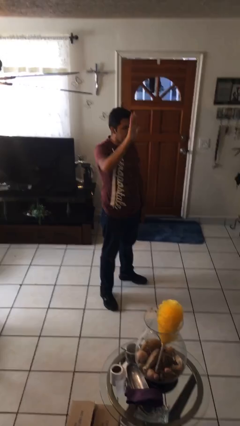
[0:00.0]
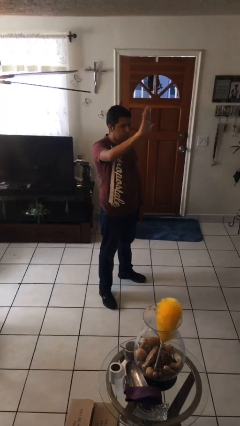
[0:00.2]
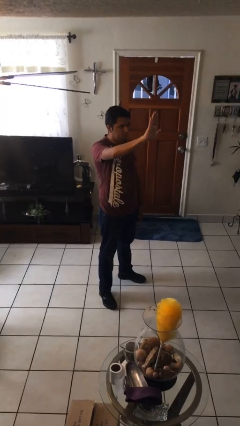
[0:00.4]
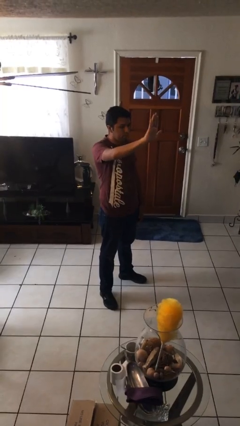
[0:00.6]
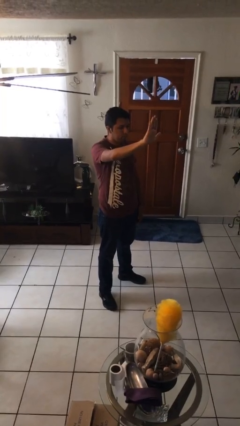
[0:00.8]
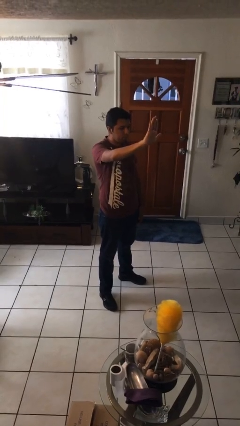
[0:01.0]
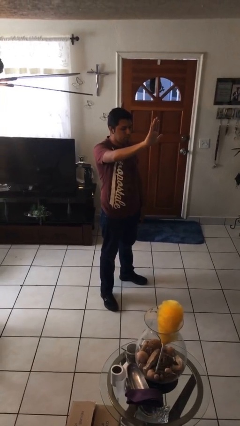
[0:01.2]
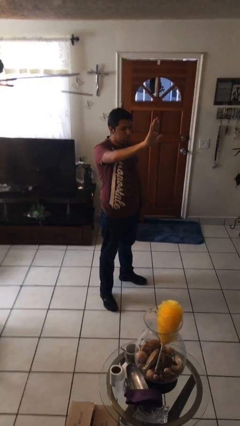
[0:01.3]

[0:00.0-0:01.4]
person gestures stop

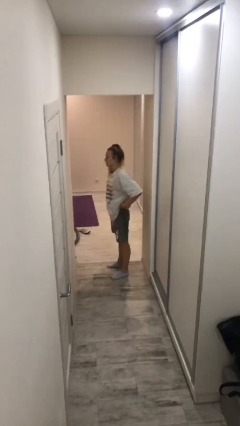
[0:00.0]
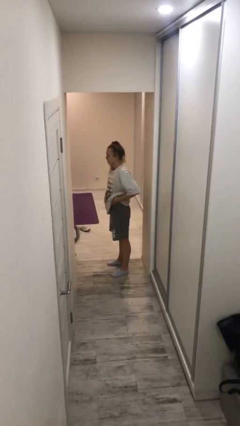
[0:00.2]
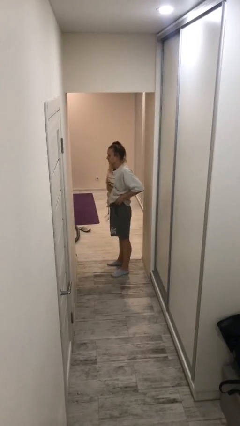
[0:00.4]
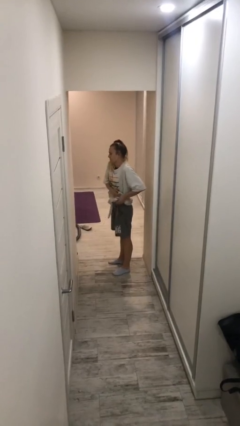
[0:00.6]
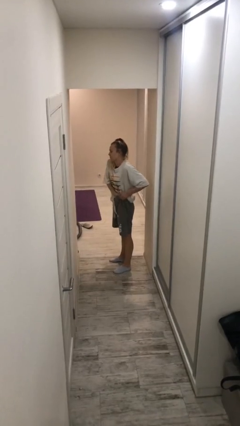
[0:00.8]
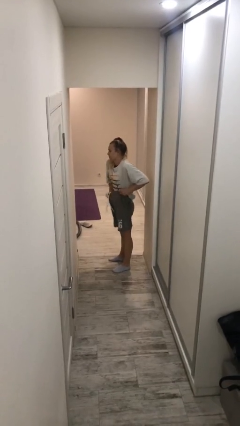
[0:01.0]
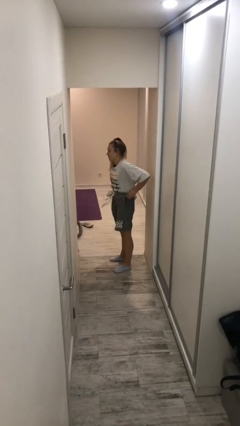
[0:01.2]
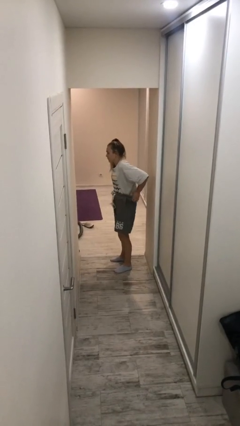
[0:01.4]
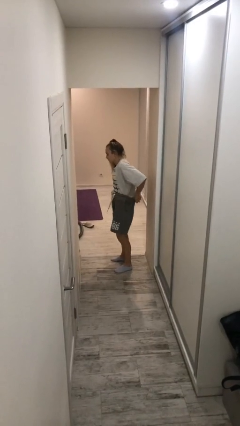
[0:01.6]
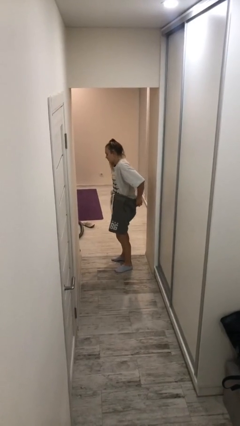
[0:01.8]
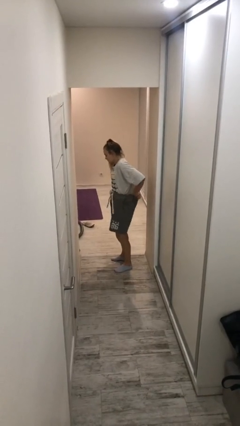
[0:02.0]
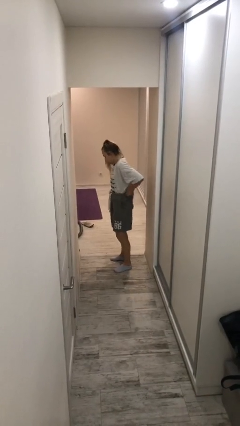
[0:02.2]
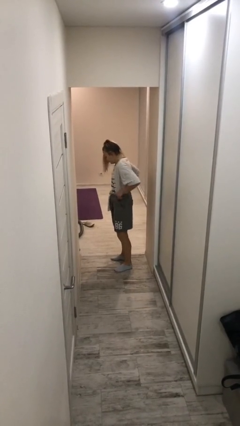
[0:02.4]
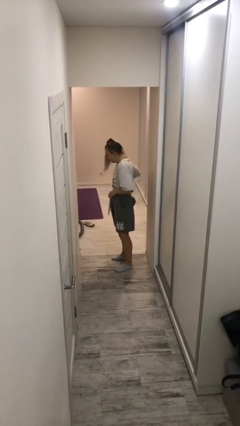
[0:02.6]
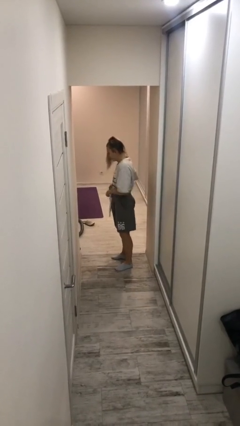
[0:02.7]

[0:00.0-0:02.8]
person tucks in shirt

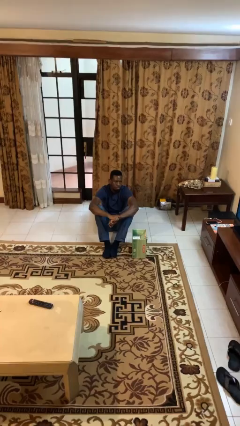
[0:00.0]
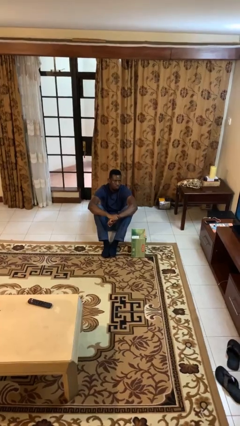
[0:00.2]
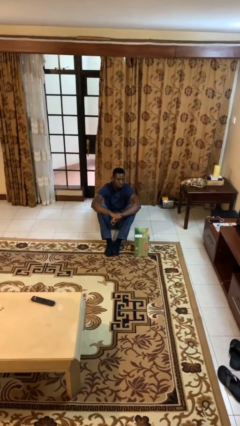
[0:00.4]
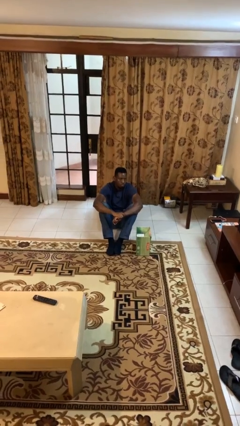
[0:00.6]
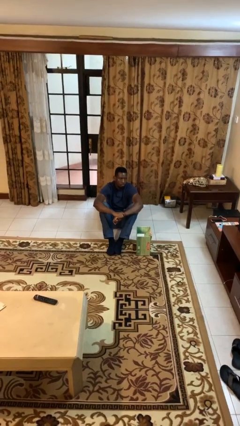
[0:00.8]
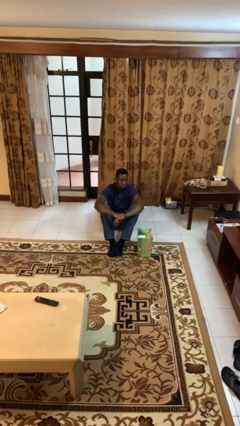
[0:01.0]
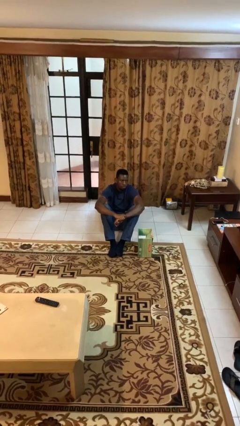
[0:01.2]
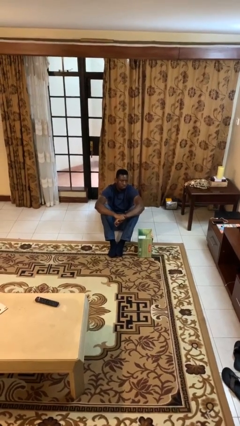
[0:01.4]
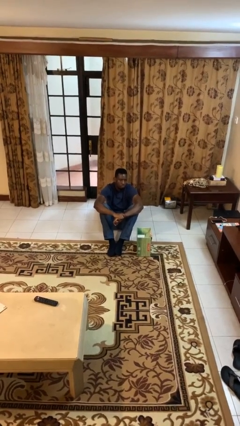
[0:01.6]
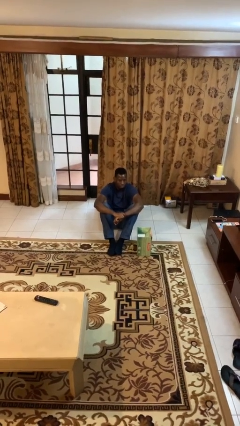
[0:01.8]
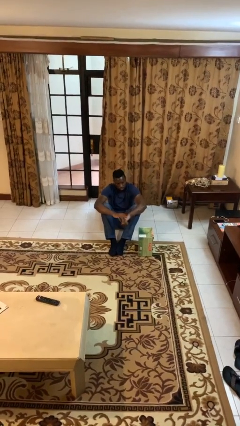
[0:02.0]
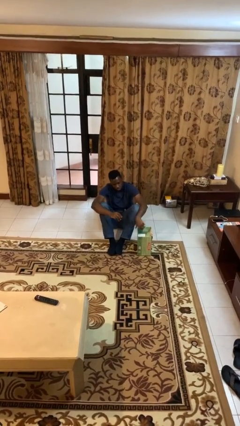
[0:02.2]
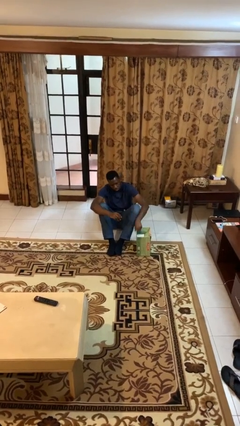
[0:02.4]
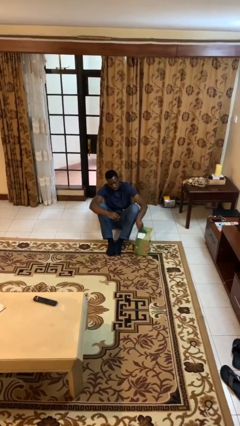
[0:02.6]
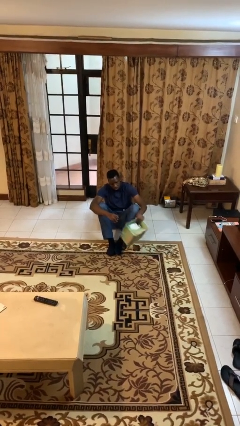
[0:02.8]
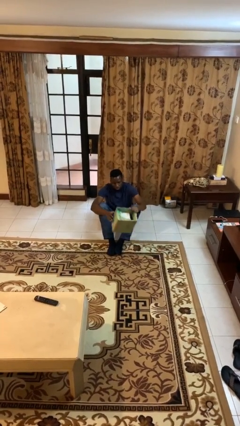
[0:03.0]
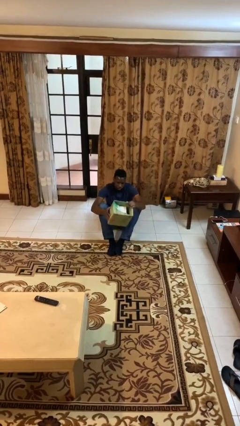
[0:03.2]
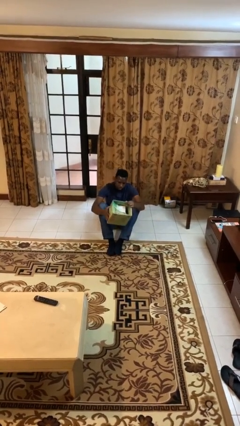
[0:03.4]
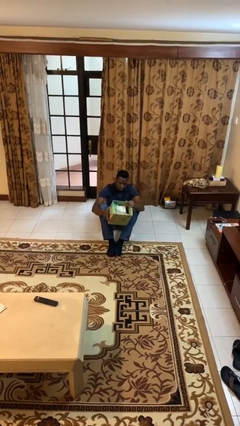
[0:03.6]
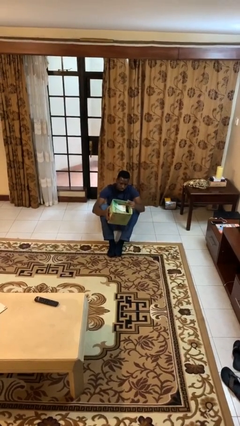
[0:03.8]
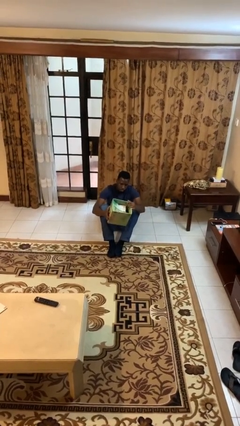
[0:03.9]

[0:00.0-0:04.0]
person picks up object from floor

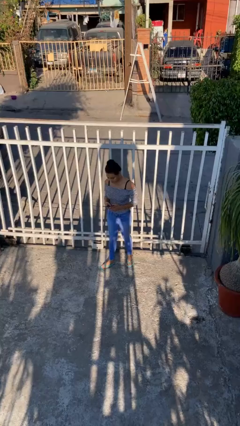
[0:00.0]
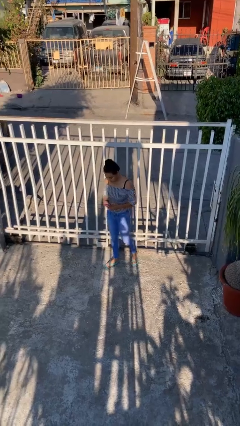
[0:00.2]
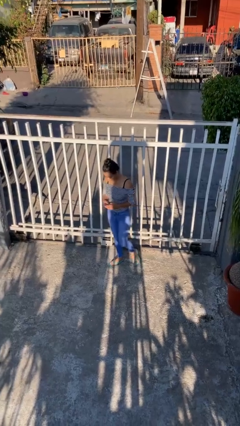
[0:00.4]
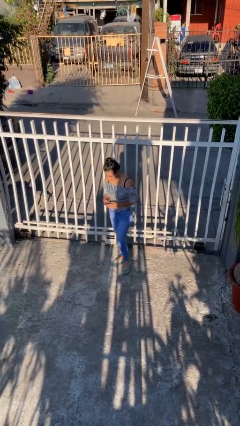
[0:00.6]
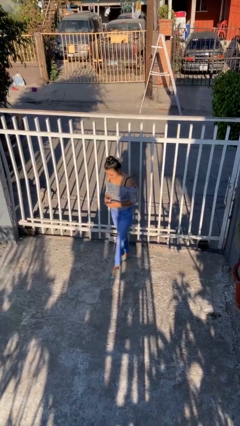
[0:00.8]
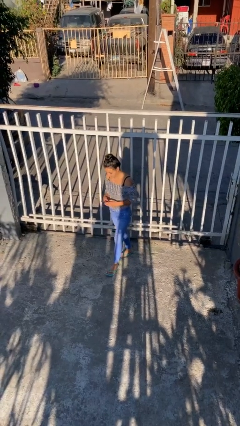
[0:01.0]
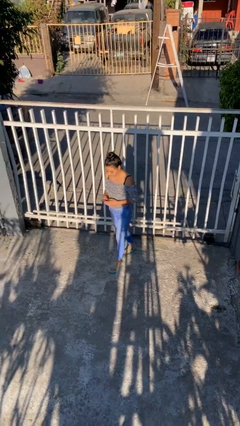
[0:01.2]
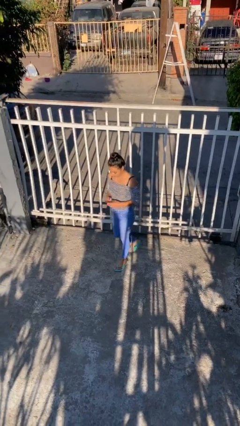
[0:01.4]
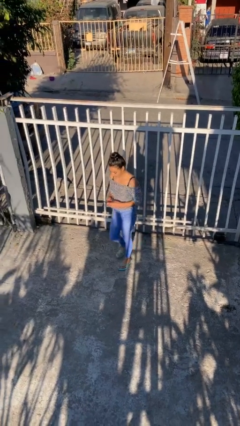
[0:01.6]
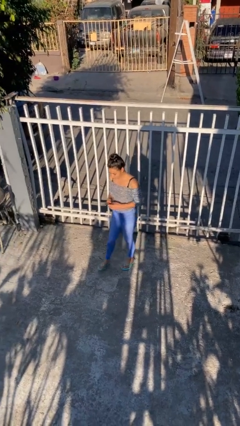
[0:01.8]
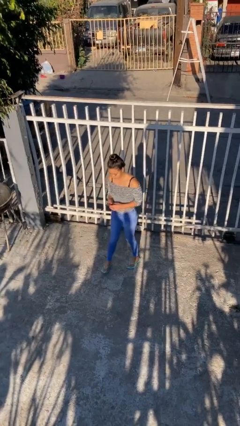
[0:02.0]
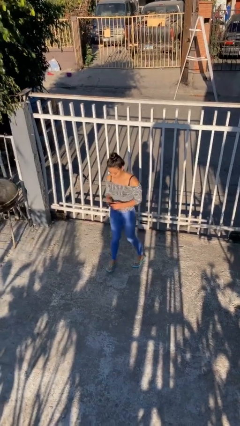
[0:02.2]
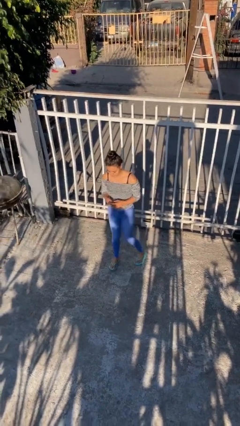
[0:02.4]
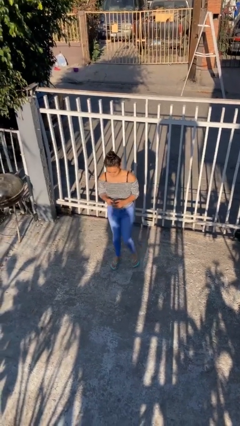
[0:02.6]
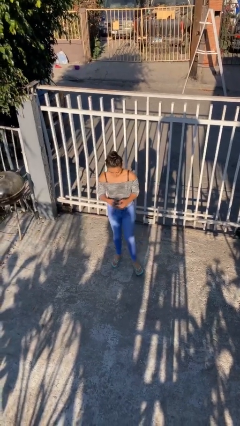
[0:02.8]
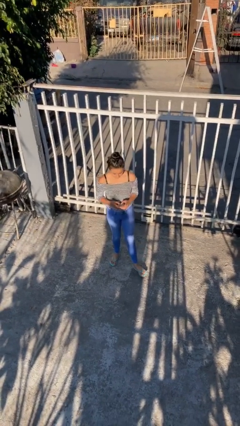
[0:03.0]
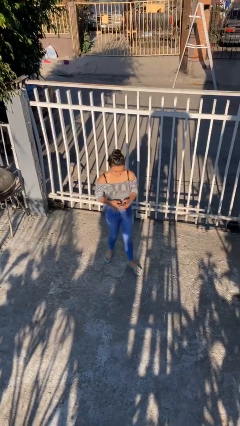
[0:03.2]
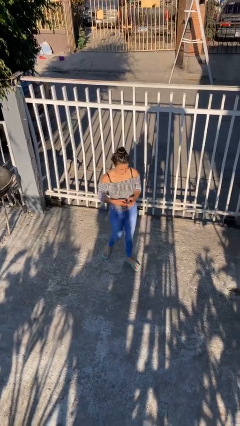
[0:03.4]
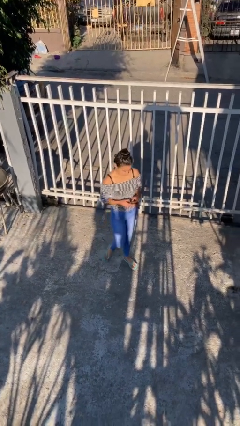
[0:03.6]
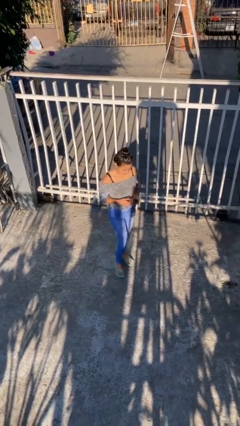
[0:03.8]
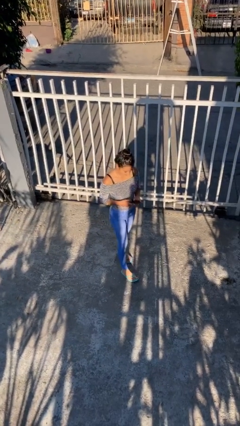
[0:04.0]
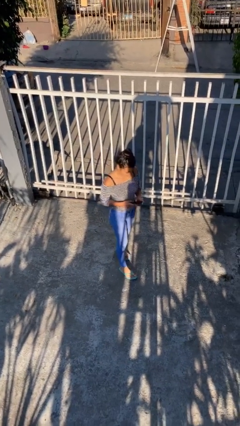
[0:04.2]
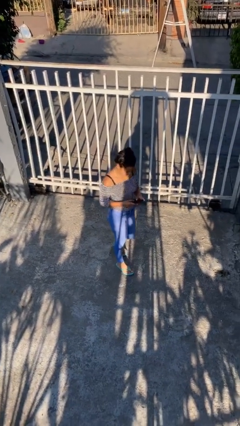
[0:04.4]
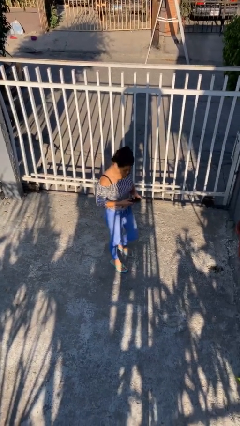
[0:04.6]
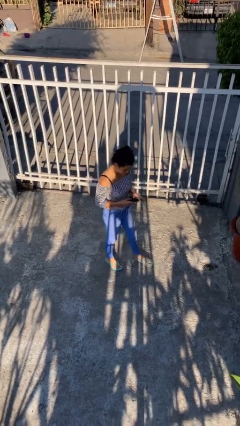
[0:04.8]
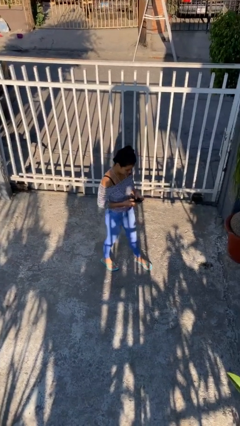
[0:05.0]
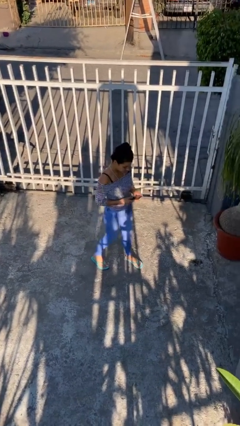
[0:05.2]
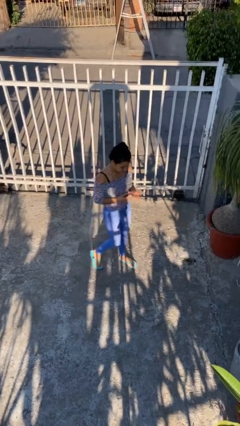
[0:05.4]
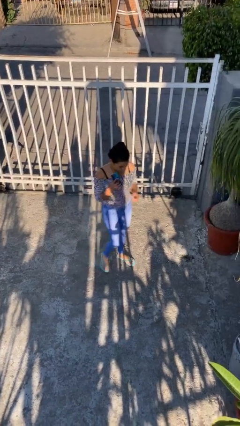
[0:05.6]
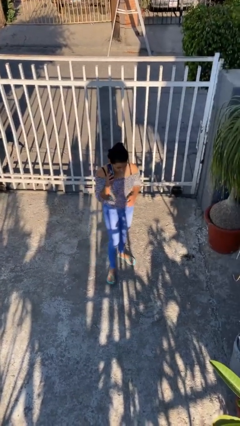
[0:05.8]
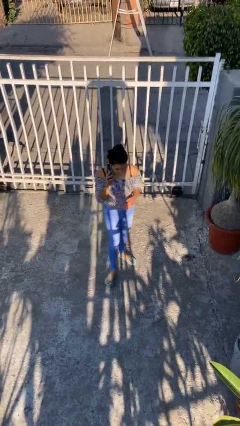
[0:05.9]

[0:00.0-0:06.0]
person texts on phone

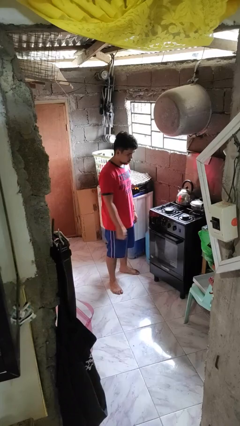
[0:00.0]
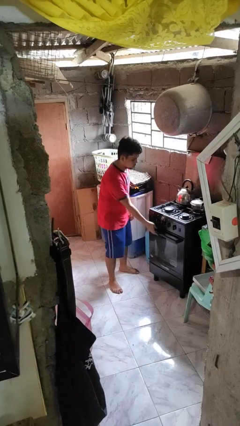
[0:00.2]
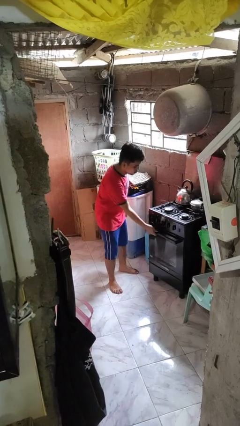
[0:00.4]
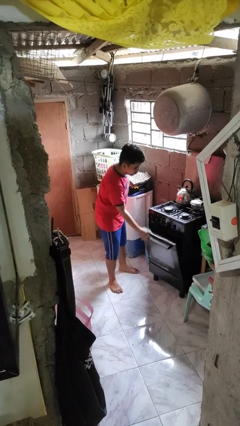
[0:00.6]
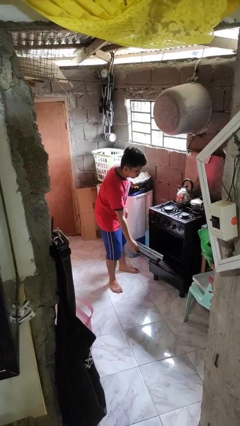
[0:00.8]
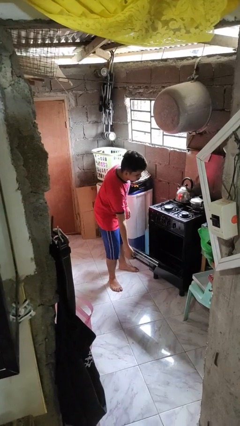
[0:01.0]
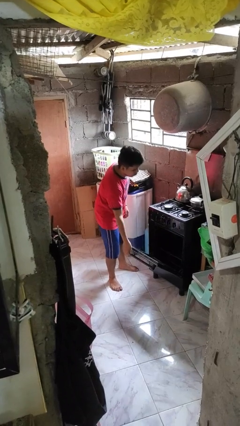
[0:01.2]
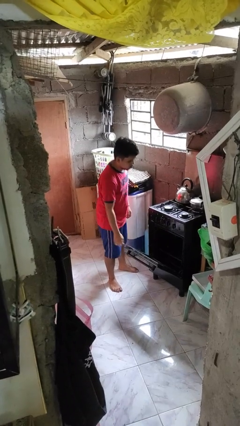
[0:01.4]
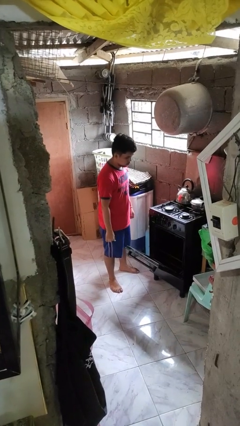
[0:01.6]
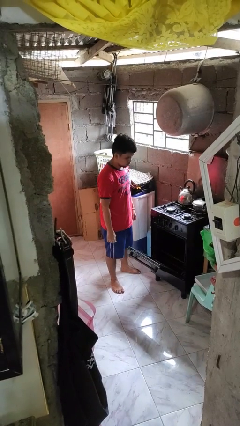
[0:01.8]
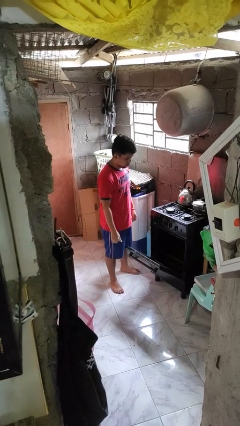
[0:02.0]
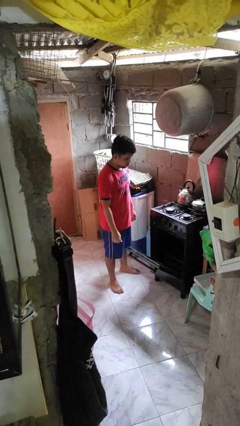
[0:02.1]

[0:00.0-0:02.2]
person opens oven door

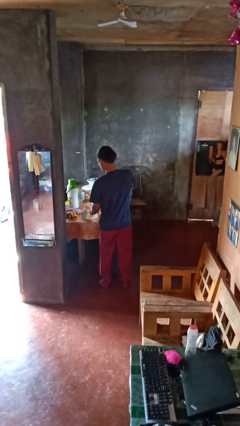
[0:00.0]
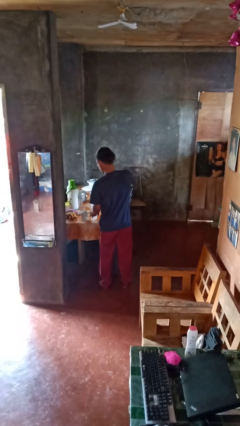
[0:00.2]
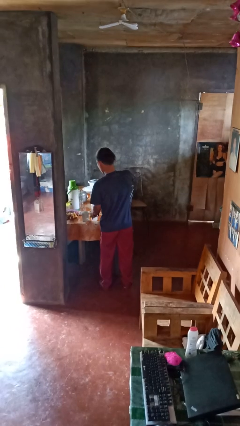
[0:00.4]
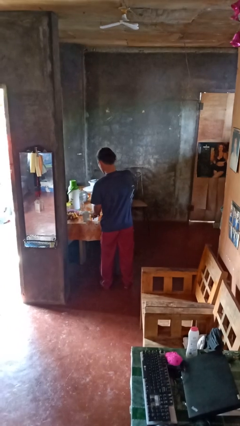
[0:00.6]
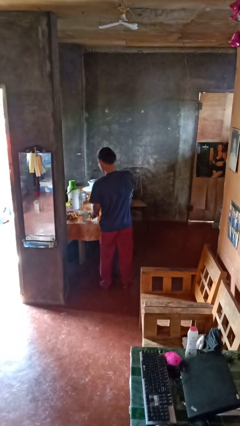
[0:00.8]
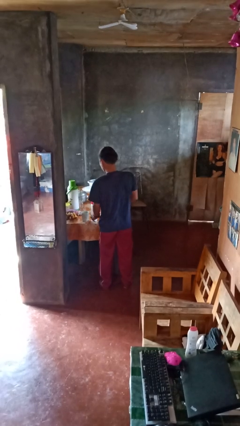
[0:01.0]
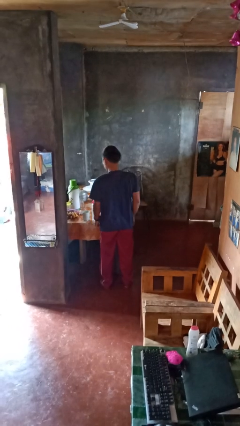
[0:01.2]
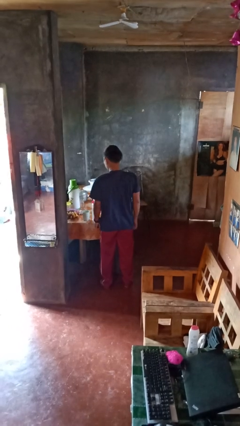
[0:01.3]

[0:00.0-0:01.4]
person screws lid to bottle
